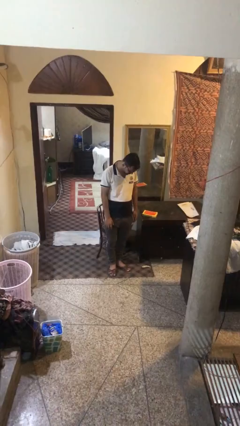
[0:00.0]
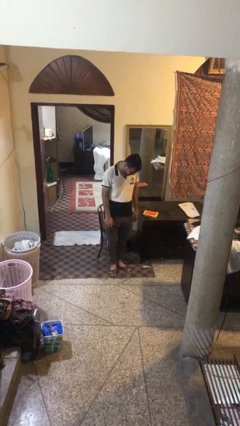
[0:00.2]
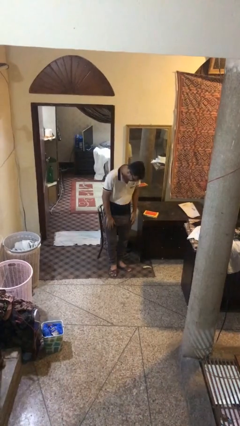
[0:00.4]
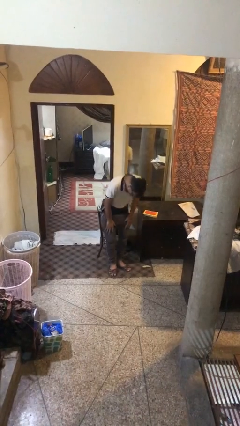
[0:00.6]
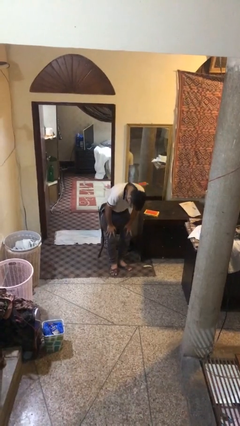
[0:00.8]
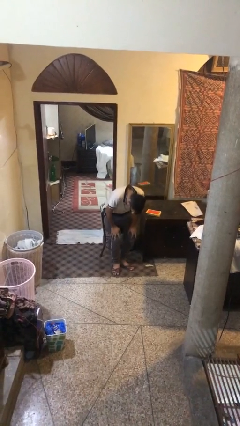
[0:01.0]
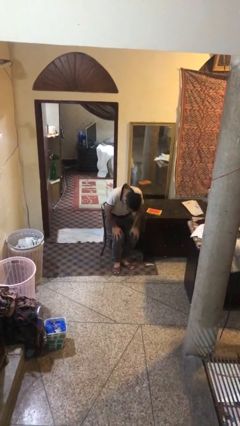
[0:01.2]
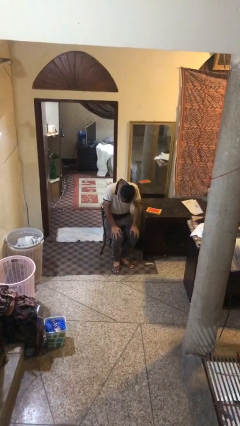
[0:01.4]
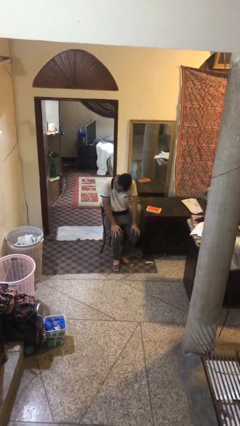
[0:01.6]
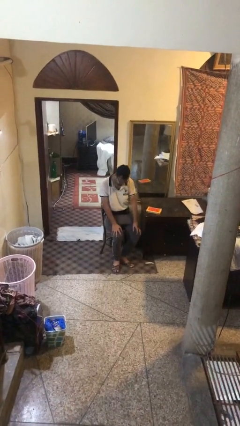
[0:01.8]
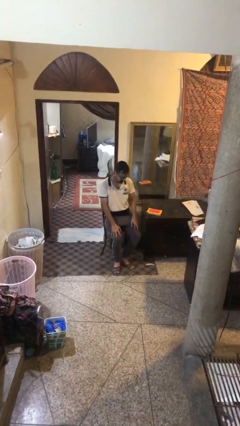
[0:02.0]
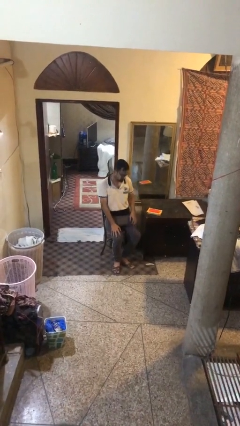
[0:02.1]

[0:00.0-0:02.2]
person sits down

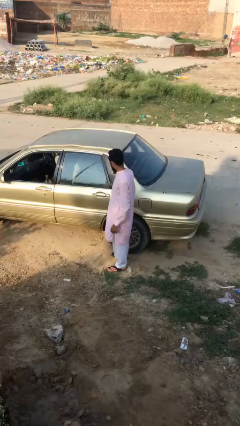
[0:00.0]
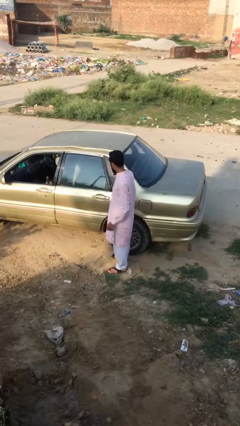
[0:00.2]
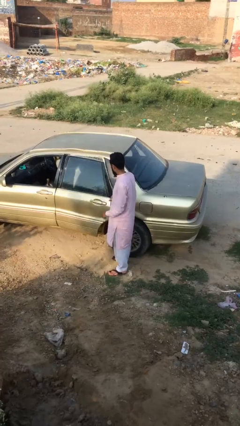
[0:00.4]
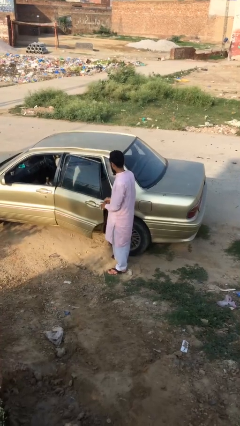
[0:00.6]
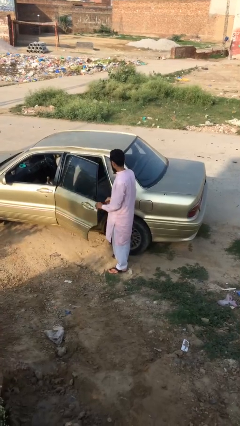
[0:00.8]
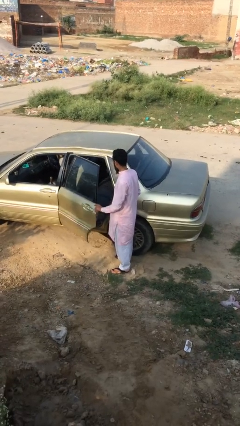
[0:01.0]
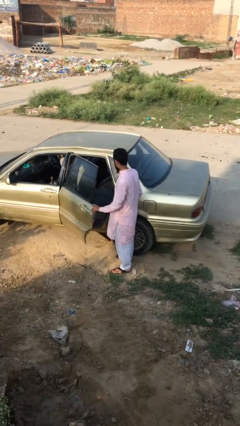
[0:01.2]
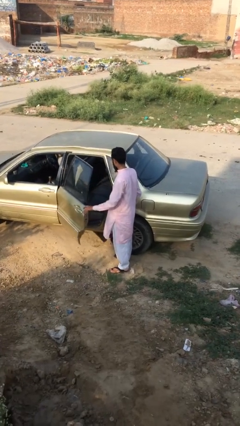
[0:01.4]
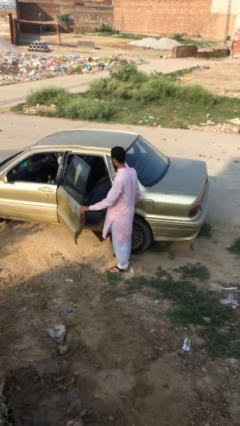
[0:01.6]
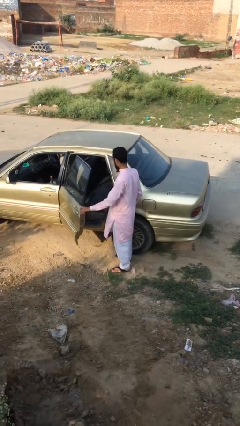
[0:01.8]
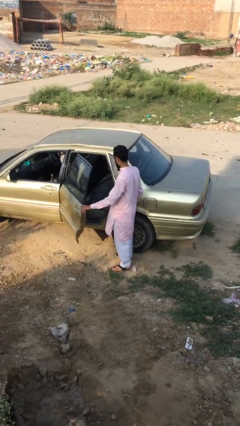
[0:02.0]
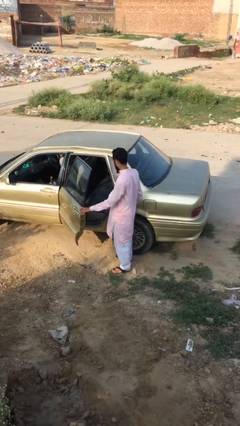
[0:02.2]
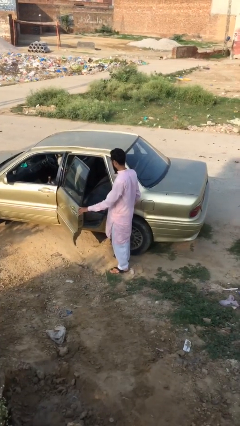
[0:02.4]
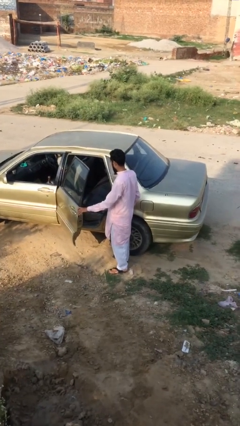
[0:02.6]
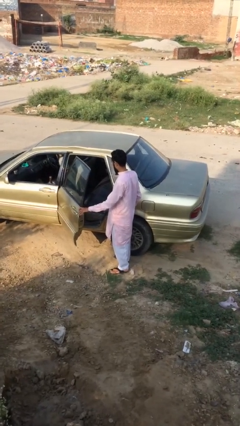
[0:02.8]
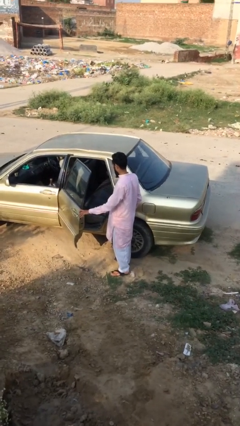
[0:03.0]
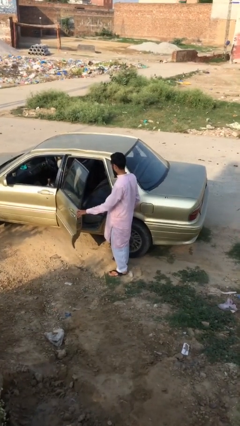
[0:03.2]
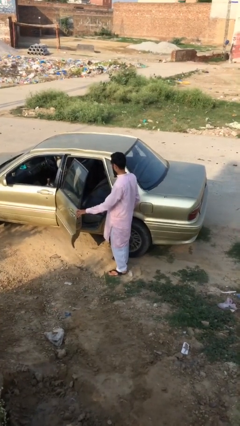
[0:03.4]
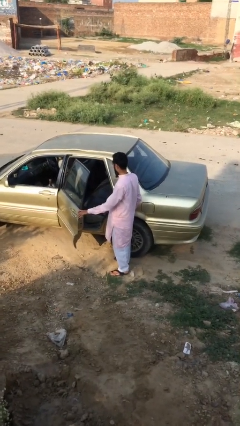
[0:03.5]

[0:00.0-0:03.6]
person opens car door

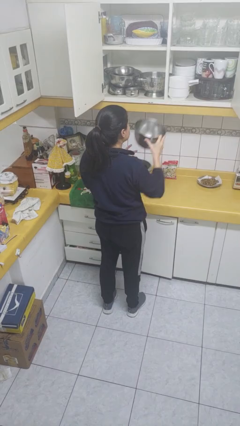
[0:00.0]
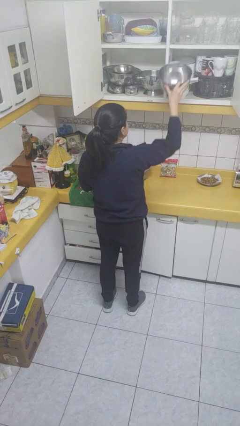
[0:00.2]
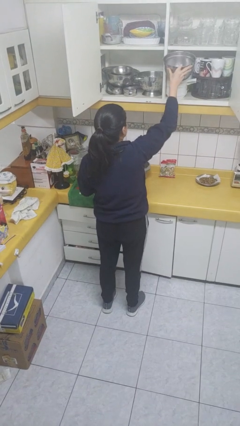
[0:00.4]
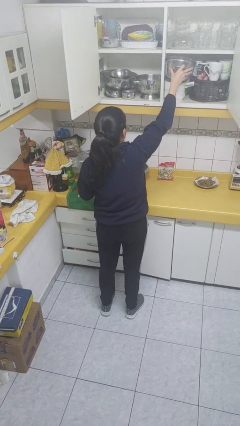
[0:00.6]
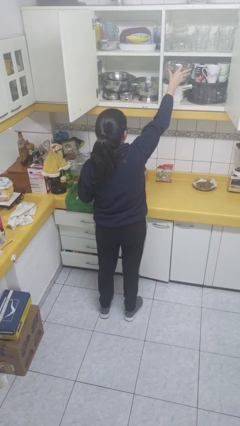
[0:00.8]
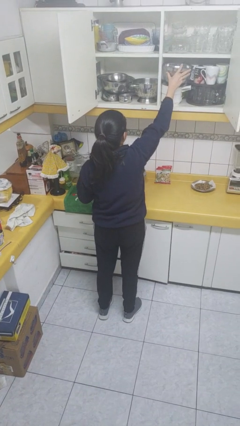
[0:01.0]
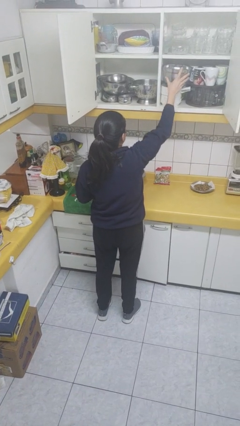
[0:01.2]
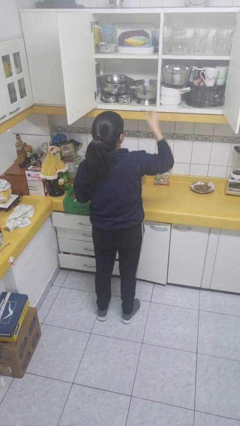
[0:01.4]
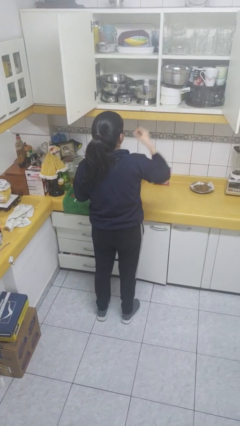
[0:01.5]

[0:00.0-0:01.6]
person puts down object into cabinet

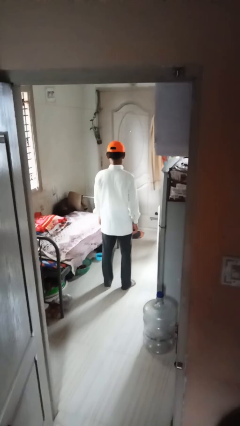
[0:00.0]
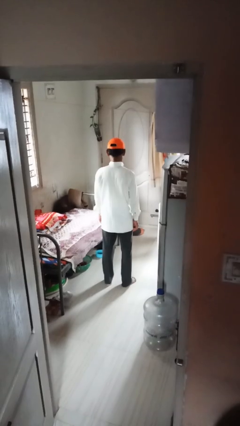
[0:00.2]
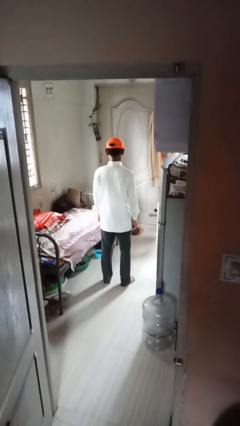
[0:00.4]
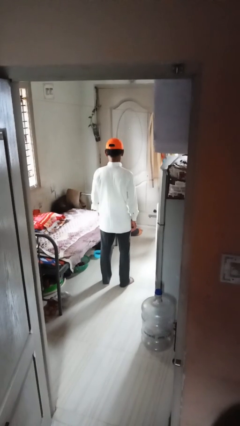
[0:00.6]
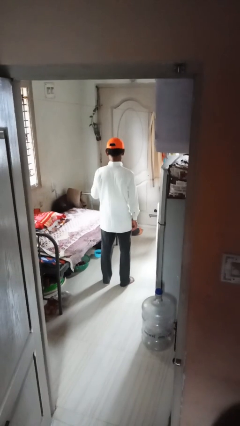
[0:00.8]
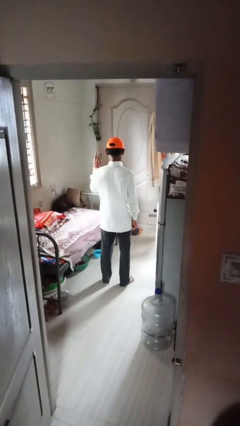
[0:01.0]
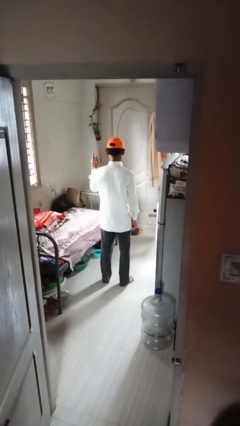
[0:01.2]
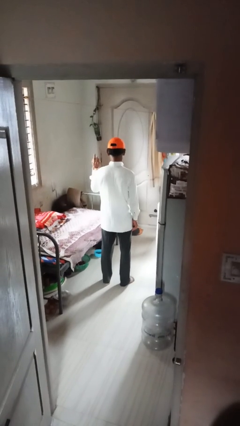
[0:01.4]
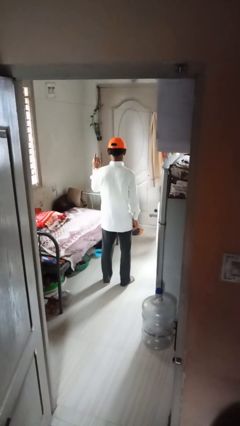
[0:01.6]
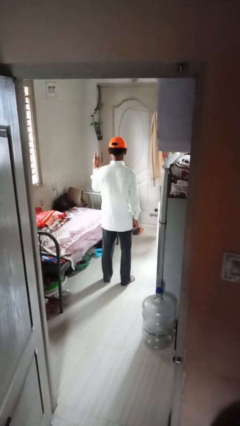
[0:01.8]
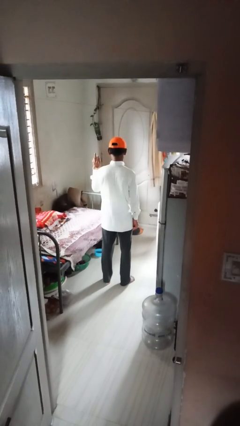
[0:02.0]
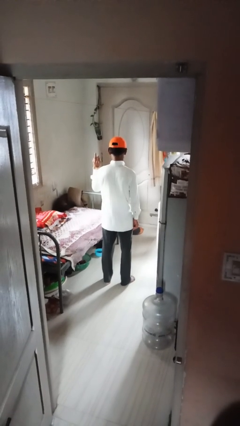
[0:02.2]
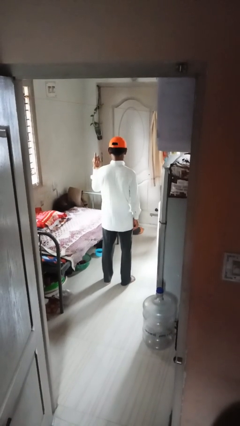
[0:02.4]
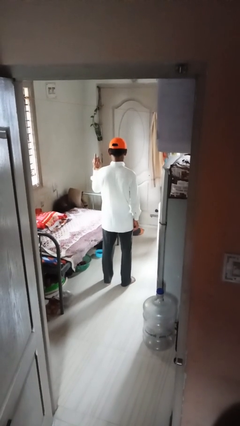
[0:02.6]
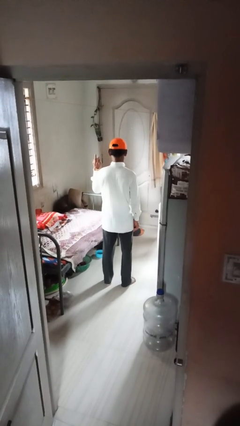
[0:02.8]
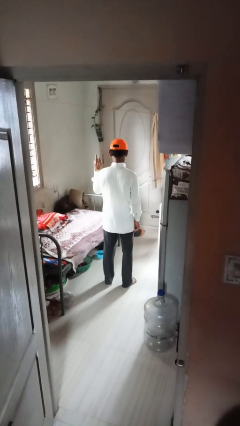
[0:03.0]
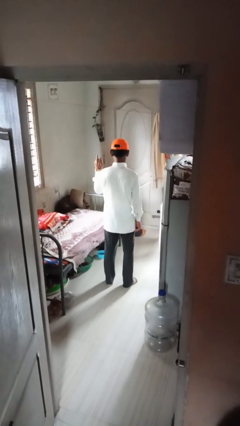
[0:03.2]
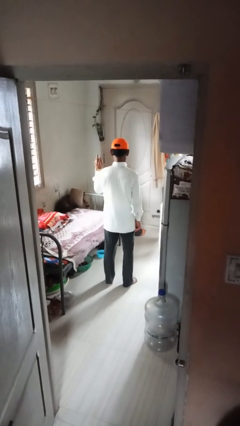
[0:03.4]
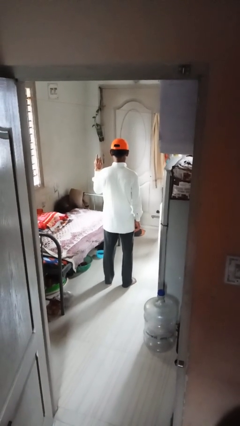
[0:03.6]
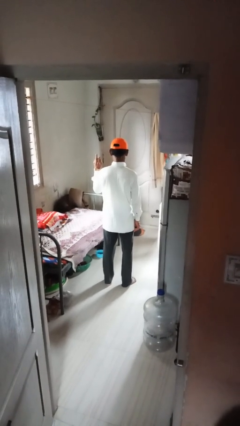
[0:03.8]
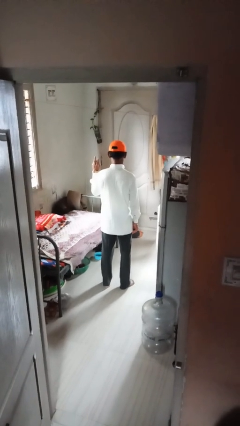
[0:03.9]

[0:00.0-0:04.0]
person gestures peace

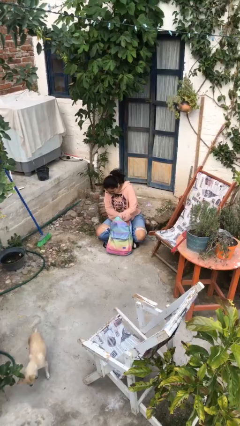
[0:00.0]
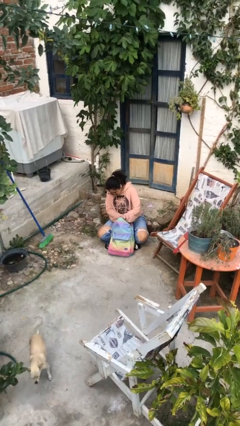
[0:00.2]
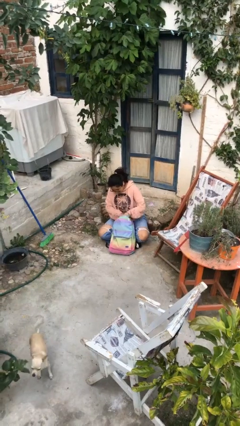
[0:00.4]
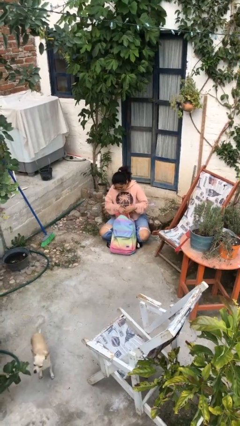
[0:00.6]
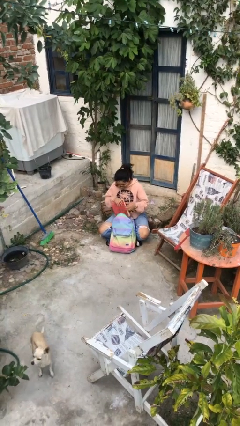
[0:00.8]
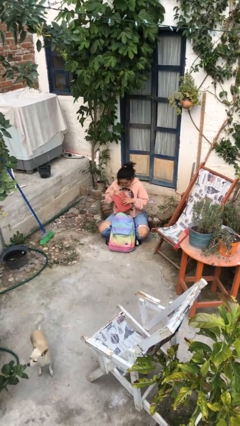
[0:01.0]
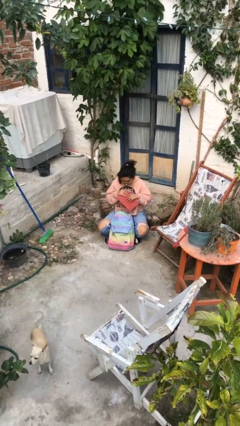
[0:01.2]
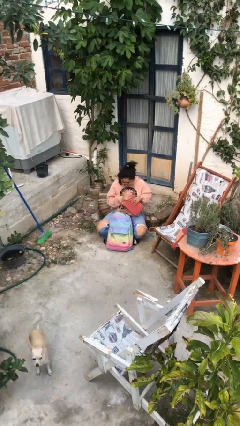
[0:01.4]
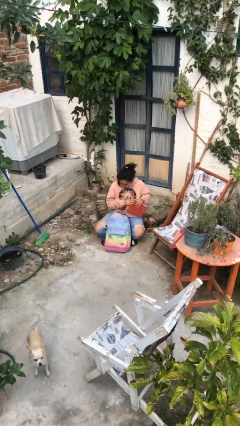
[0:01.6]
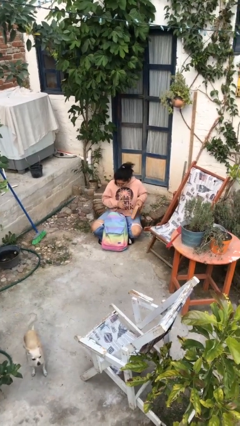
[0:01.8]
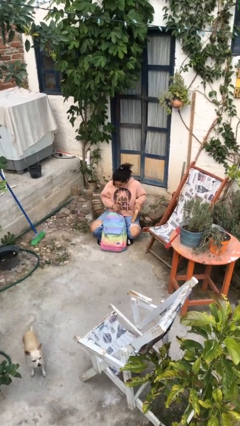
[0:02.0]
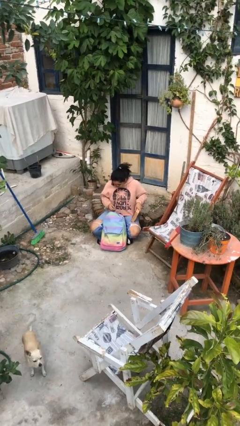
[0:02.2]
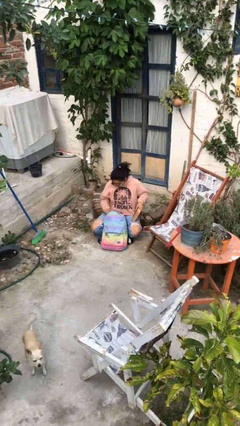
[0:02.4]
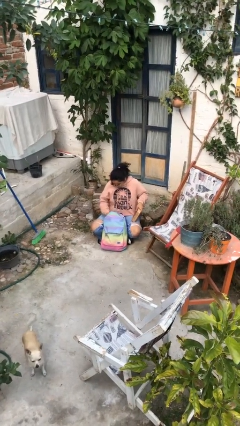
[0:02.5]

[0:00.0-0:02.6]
person takes object from backpack

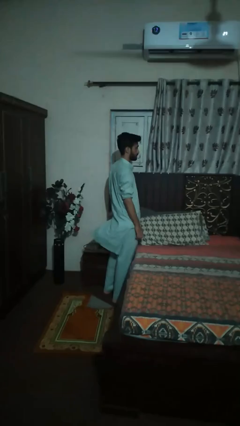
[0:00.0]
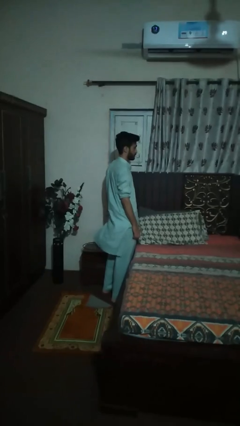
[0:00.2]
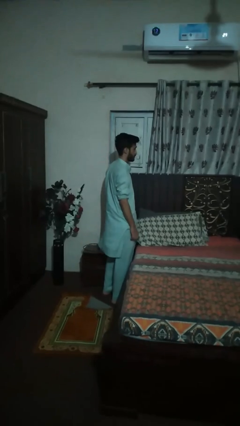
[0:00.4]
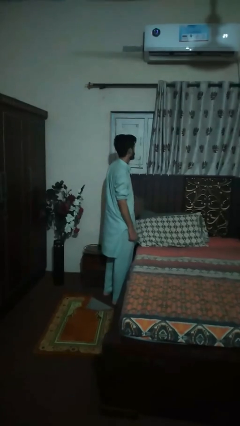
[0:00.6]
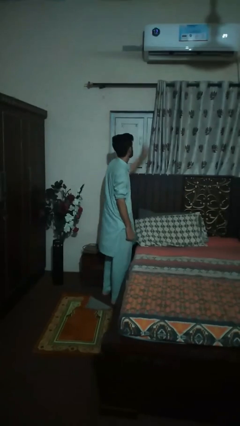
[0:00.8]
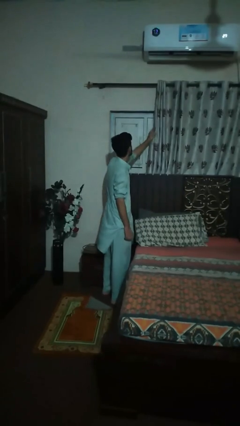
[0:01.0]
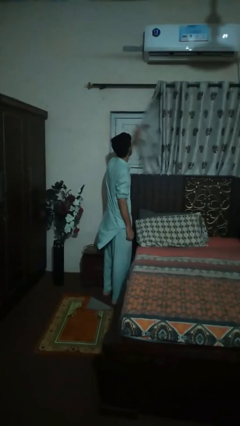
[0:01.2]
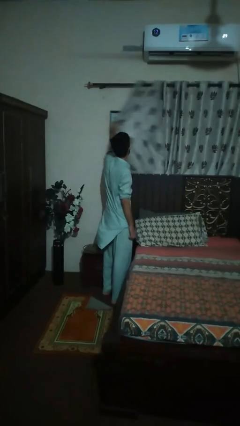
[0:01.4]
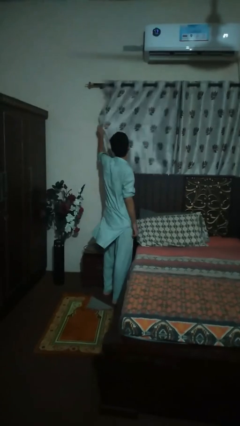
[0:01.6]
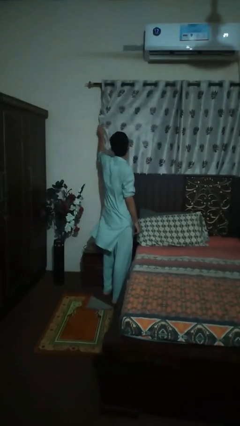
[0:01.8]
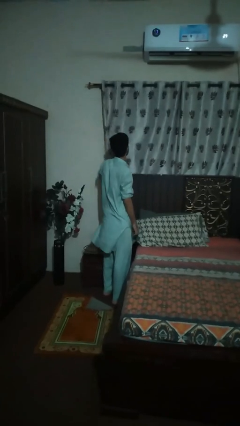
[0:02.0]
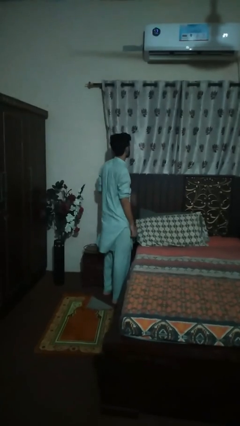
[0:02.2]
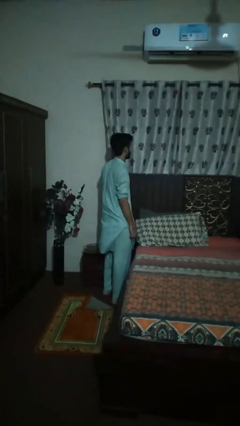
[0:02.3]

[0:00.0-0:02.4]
person closes curtains

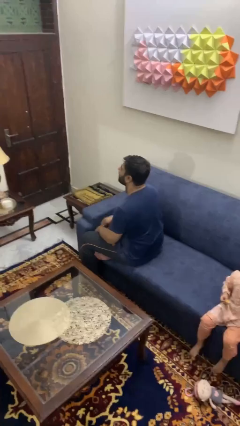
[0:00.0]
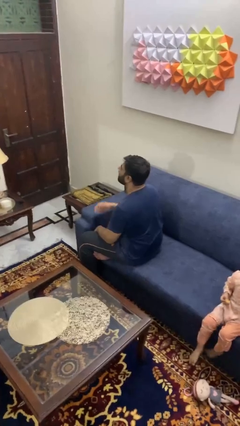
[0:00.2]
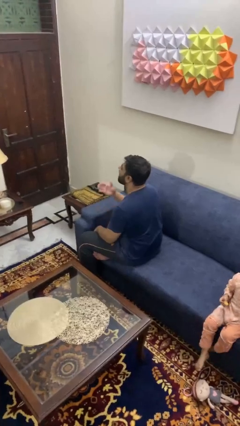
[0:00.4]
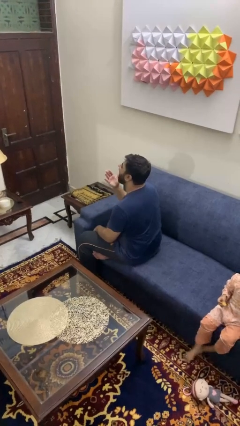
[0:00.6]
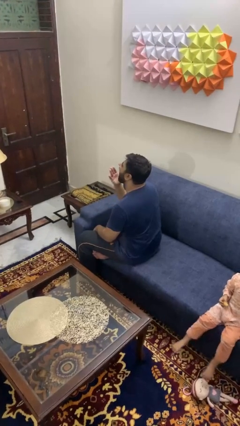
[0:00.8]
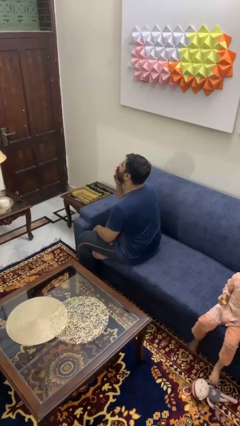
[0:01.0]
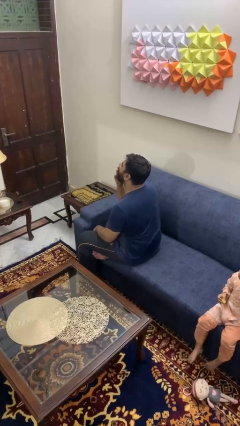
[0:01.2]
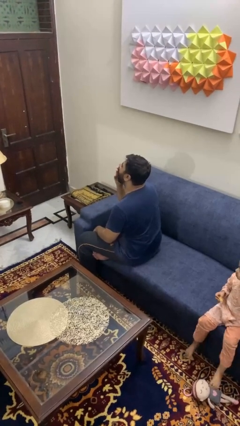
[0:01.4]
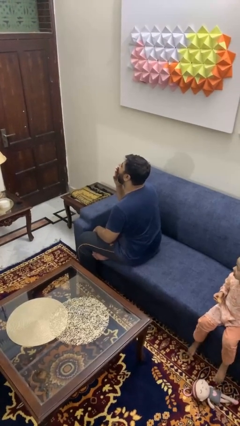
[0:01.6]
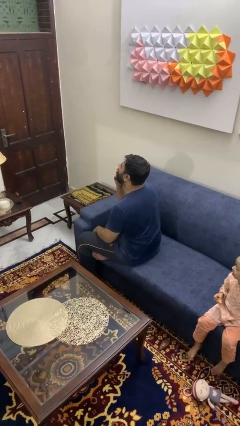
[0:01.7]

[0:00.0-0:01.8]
person yawns
